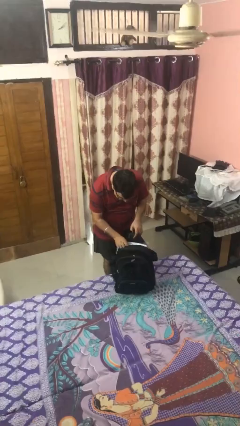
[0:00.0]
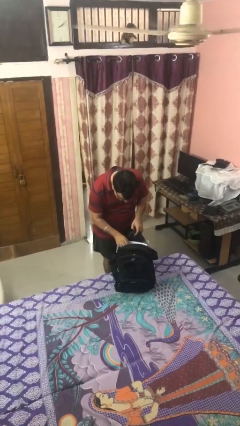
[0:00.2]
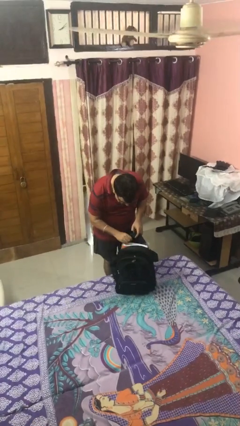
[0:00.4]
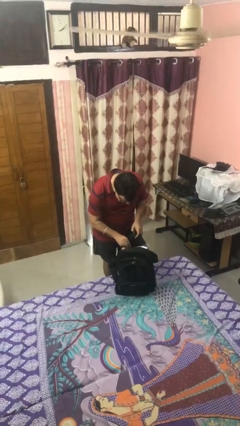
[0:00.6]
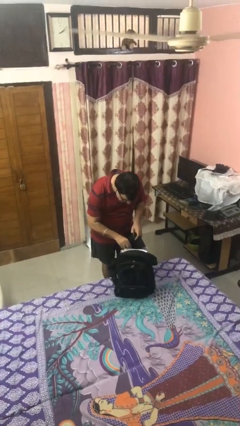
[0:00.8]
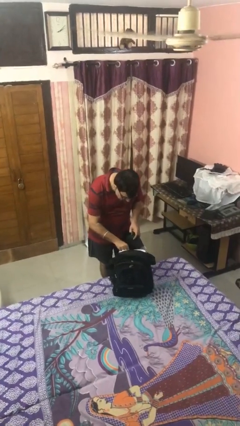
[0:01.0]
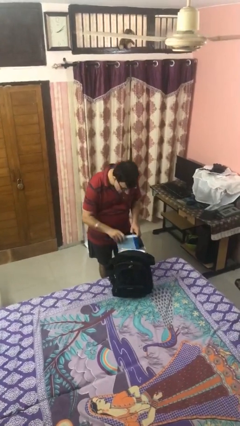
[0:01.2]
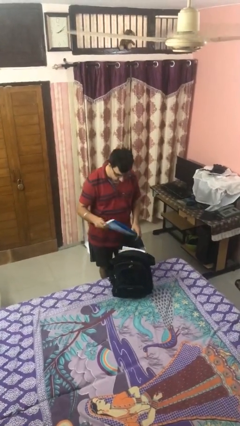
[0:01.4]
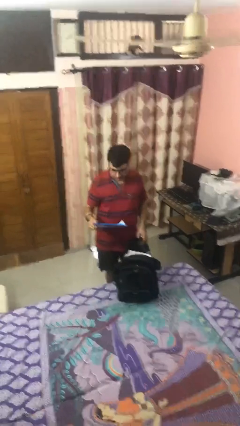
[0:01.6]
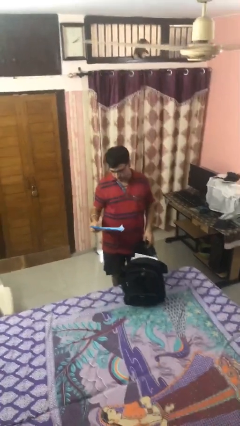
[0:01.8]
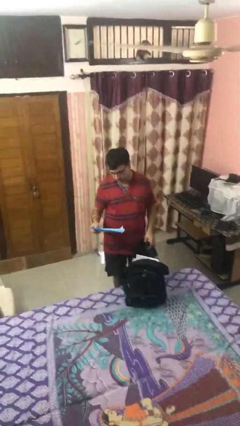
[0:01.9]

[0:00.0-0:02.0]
person takes object from backpack

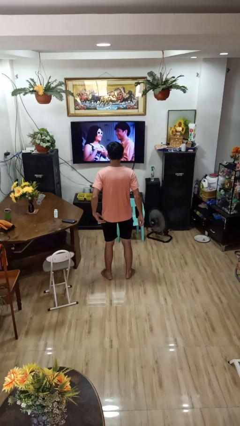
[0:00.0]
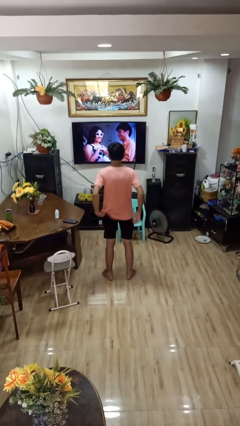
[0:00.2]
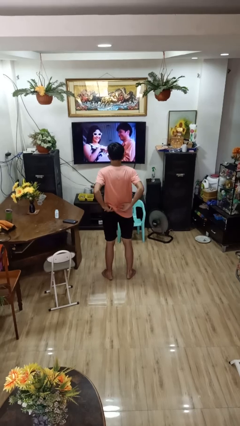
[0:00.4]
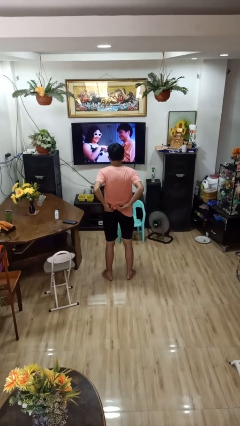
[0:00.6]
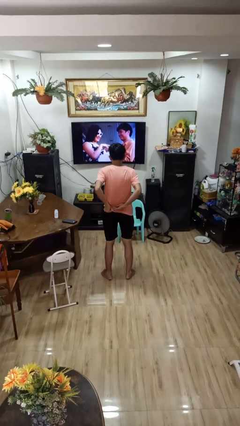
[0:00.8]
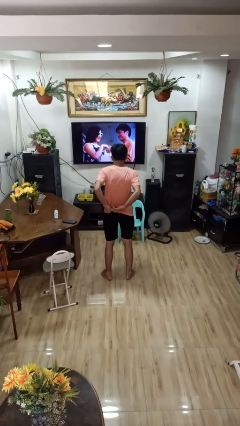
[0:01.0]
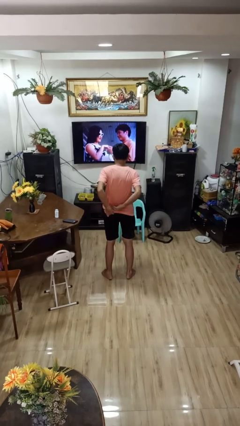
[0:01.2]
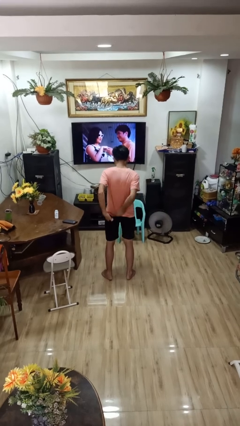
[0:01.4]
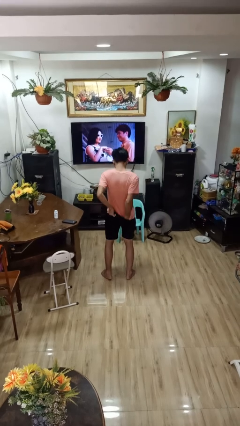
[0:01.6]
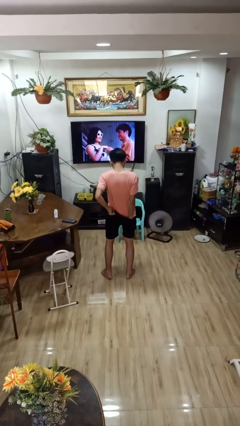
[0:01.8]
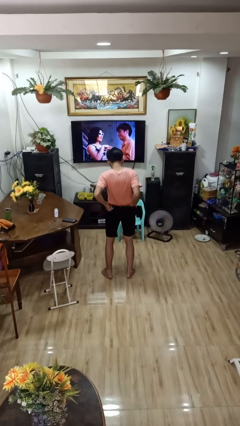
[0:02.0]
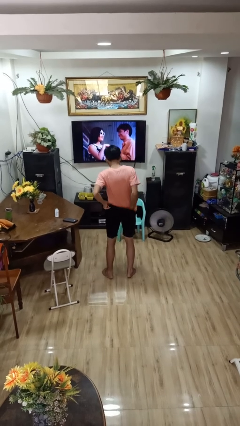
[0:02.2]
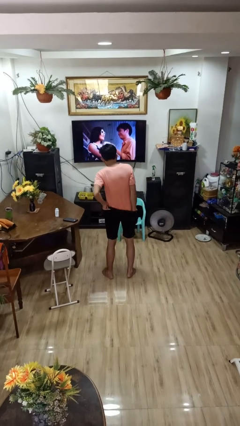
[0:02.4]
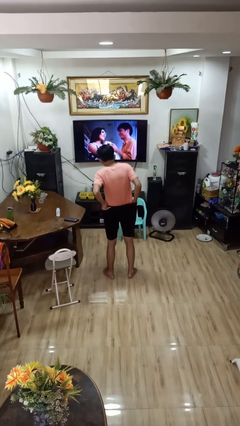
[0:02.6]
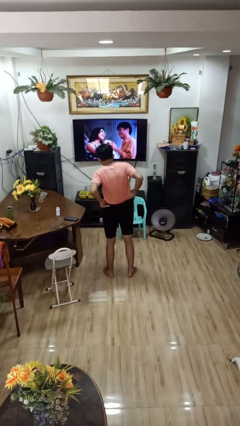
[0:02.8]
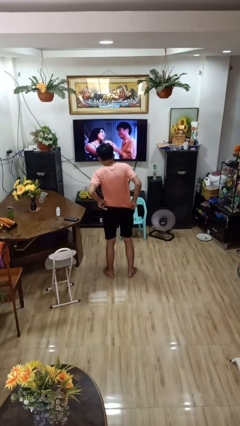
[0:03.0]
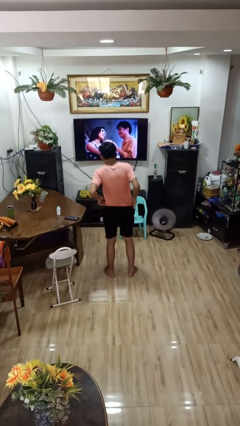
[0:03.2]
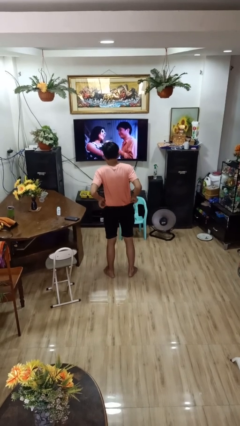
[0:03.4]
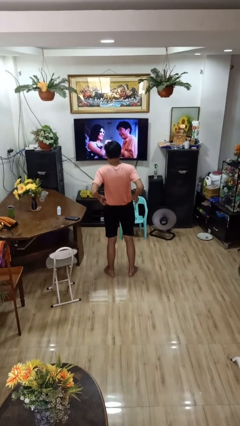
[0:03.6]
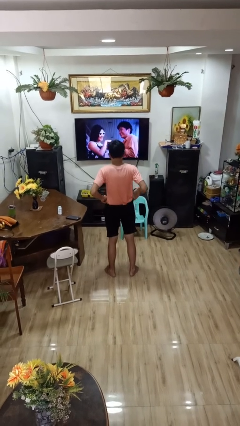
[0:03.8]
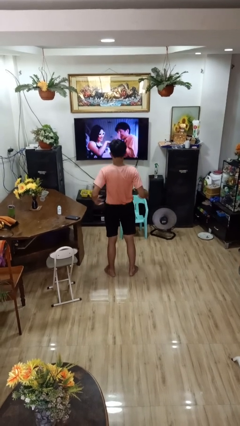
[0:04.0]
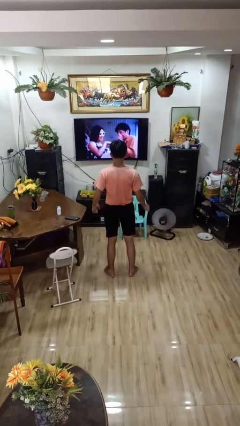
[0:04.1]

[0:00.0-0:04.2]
person tucks in shirt

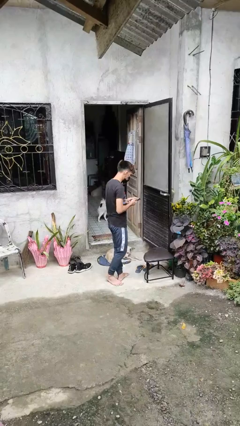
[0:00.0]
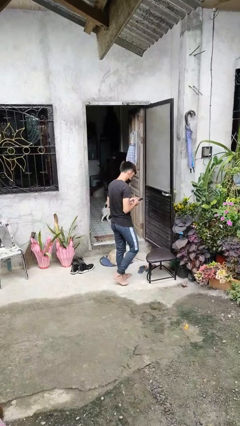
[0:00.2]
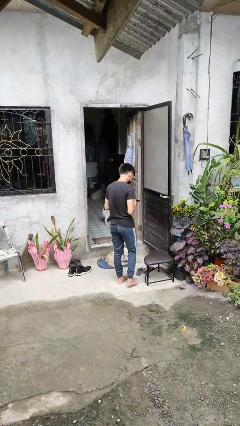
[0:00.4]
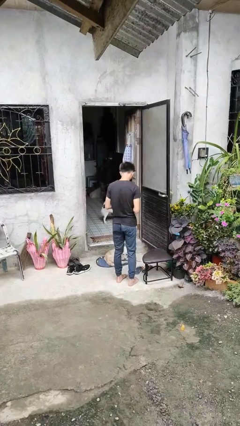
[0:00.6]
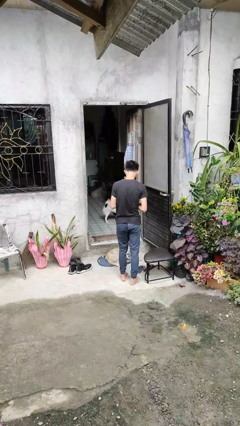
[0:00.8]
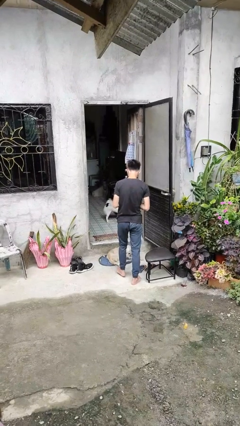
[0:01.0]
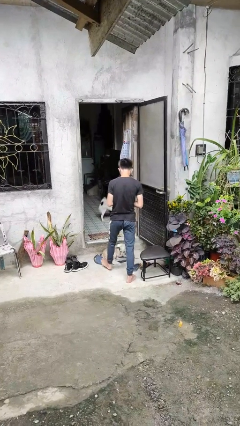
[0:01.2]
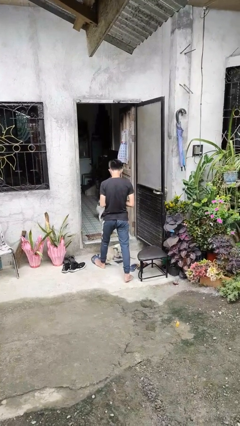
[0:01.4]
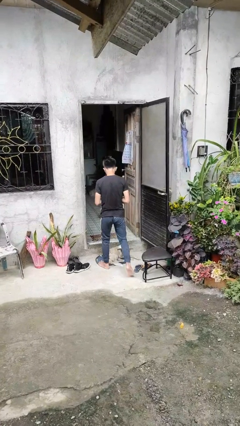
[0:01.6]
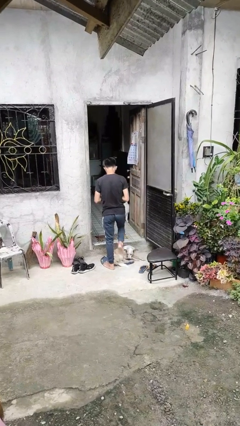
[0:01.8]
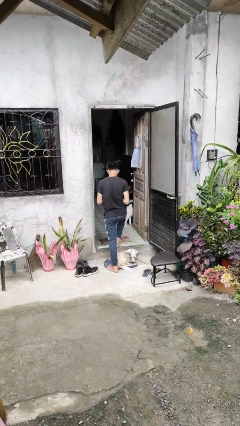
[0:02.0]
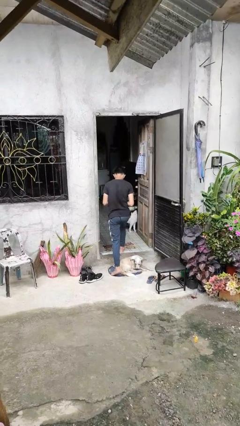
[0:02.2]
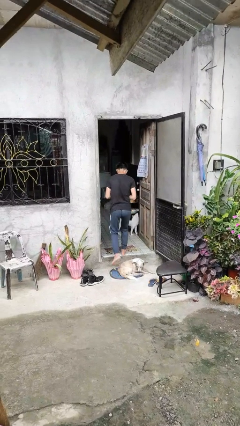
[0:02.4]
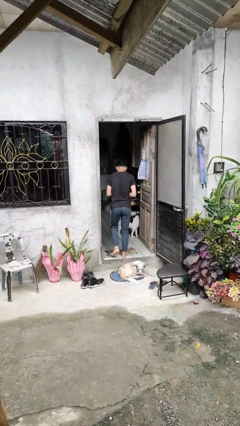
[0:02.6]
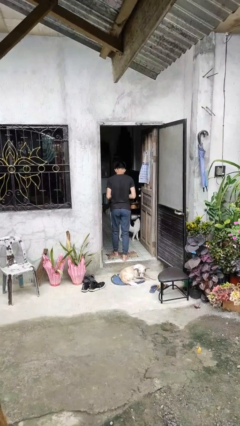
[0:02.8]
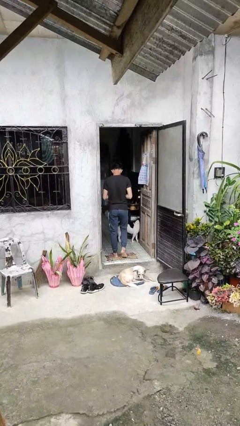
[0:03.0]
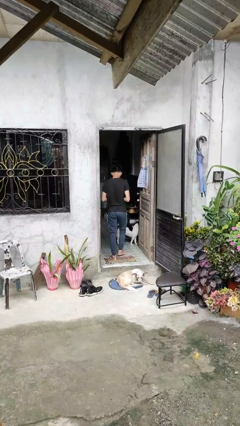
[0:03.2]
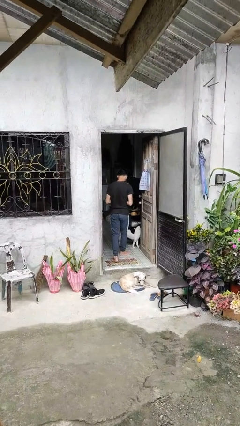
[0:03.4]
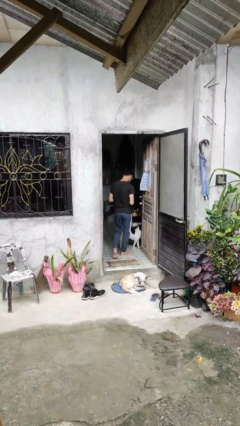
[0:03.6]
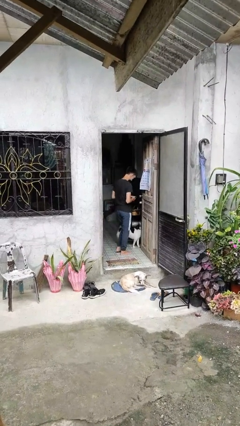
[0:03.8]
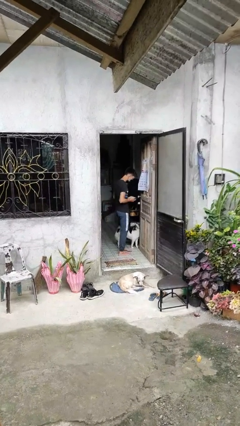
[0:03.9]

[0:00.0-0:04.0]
person exits scene through structure

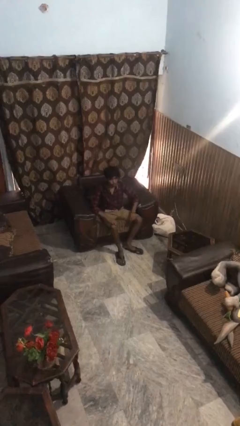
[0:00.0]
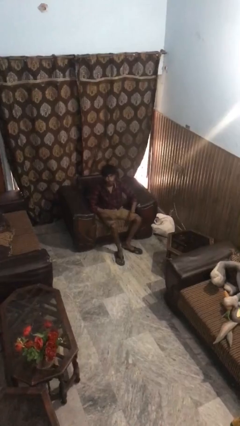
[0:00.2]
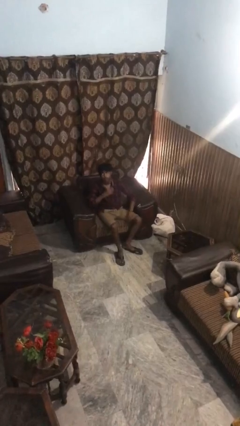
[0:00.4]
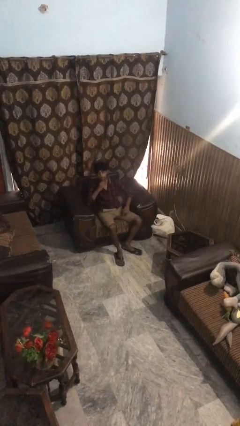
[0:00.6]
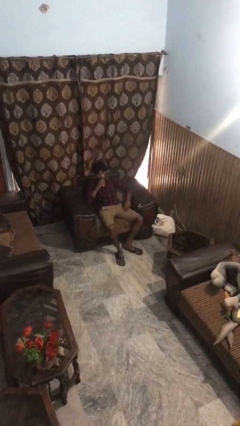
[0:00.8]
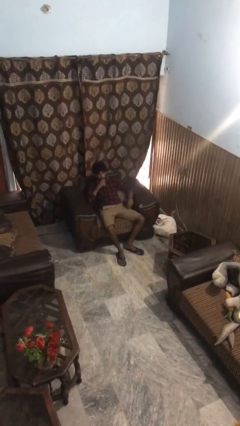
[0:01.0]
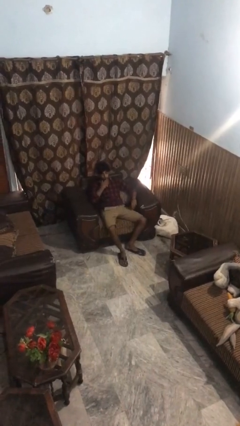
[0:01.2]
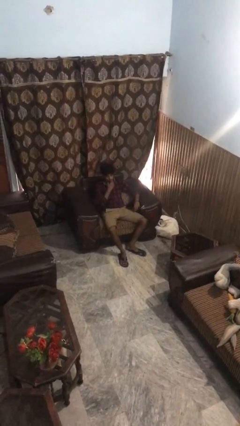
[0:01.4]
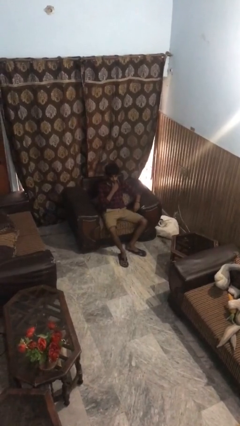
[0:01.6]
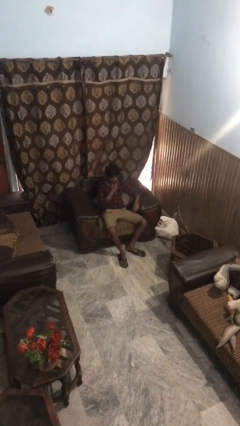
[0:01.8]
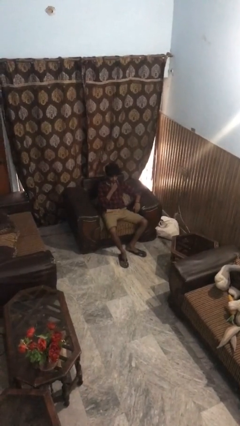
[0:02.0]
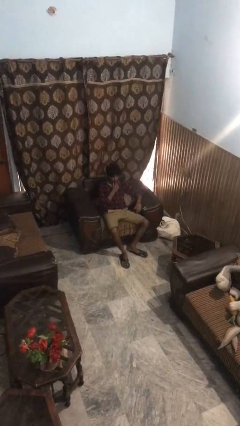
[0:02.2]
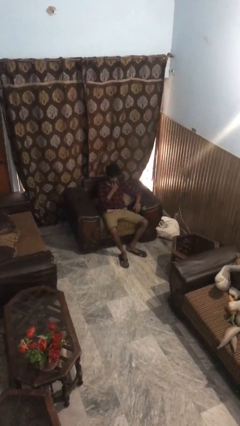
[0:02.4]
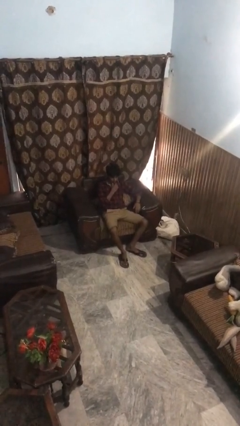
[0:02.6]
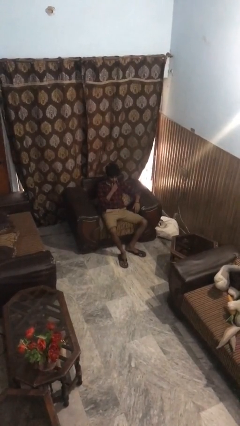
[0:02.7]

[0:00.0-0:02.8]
person strokes chin

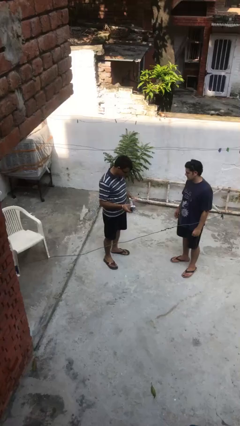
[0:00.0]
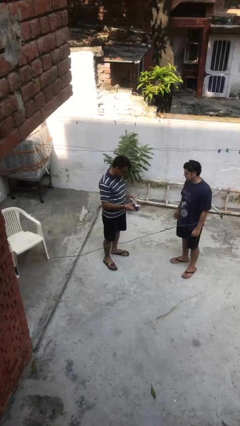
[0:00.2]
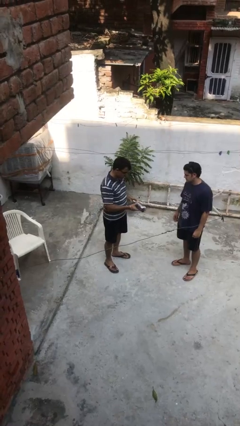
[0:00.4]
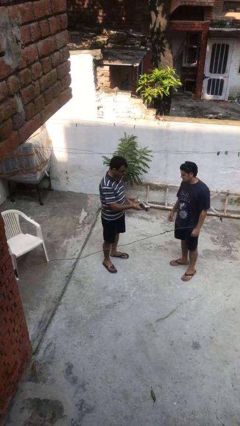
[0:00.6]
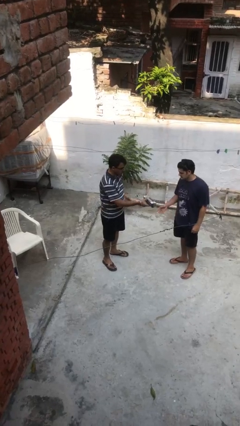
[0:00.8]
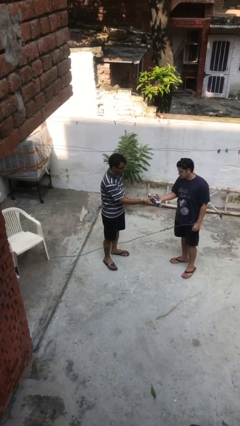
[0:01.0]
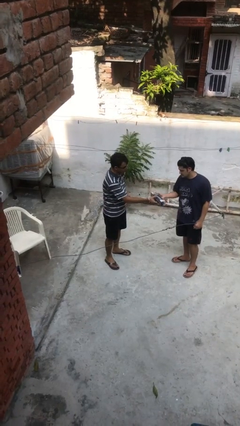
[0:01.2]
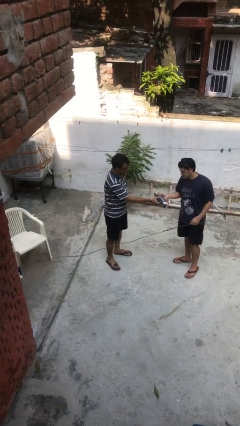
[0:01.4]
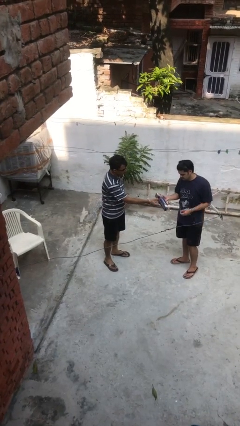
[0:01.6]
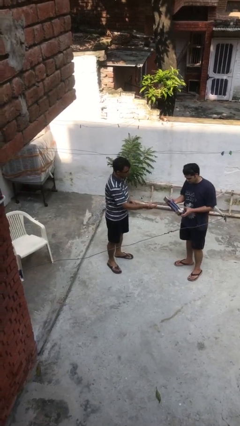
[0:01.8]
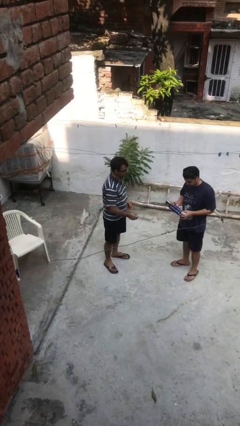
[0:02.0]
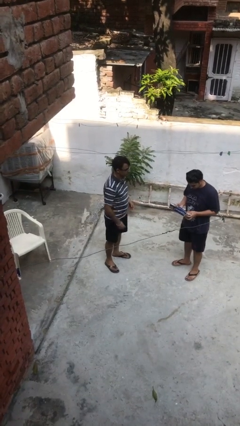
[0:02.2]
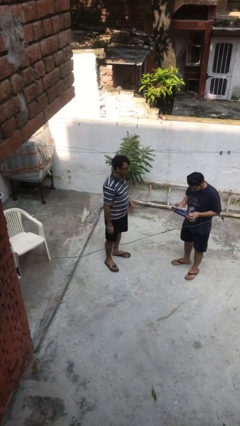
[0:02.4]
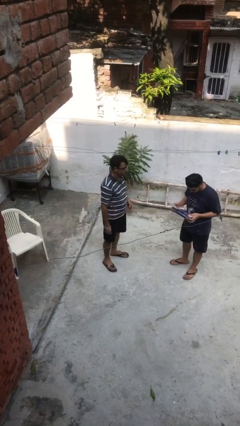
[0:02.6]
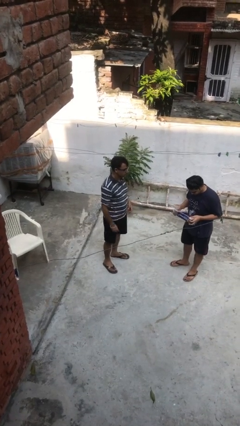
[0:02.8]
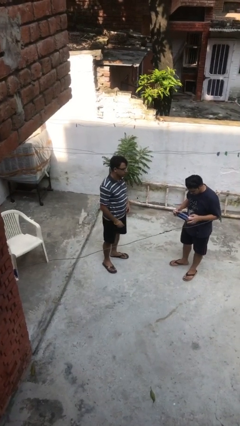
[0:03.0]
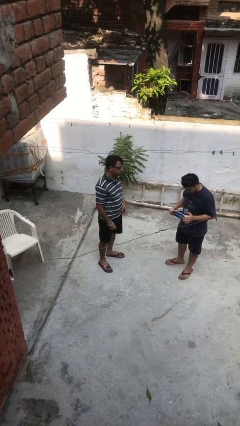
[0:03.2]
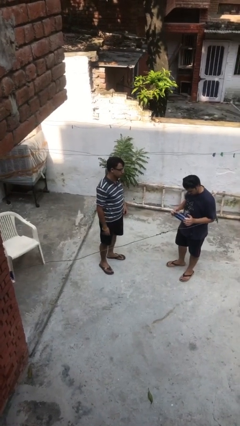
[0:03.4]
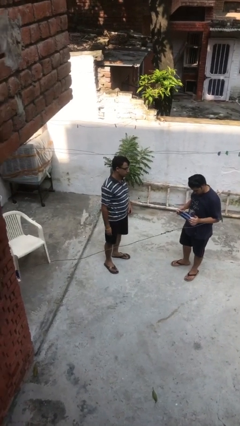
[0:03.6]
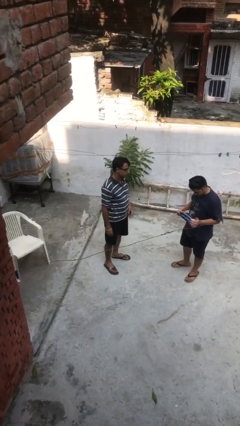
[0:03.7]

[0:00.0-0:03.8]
person transfers object to person

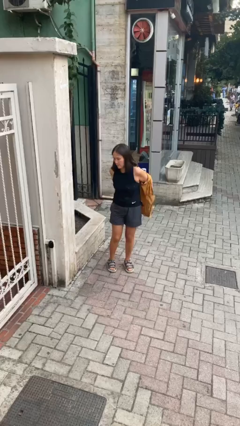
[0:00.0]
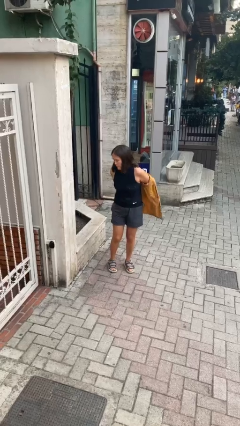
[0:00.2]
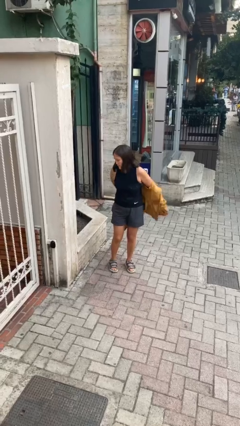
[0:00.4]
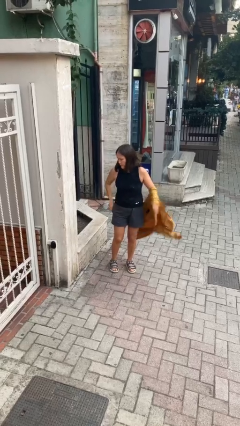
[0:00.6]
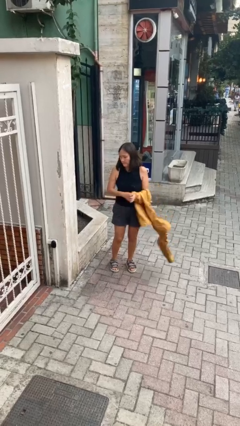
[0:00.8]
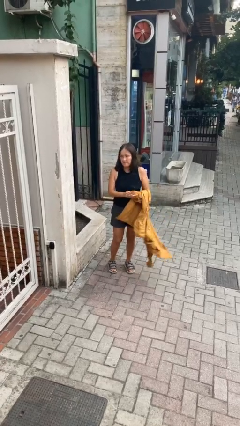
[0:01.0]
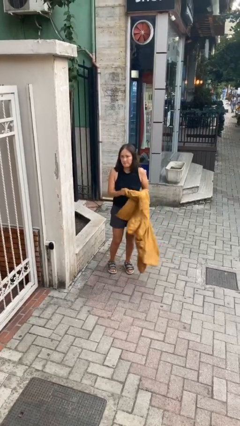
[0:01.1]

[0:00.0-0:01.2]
person takes off jacket
